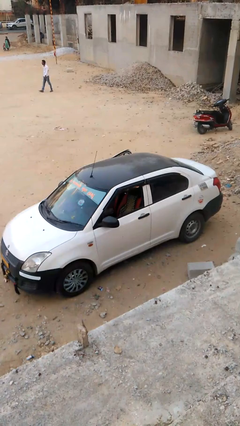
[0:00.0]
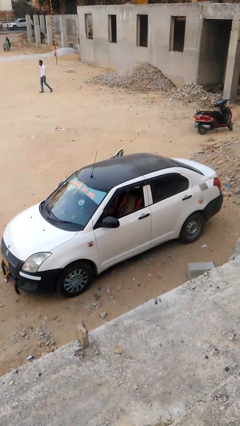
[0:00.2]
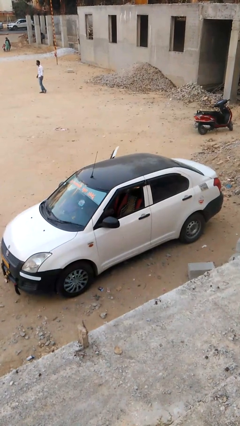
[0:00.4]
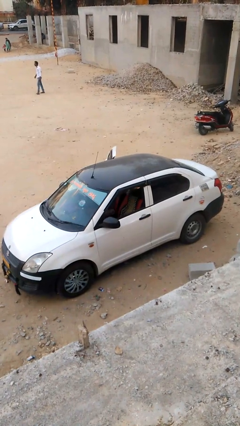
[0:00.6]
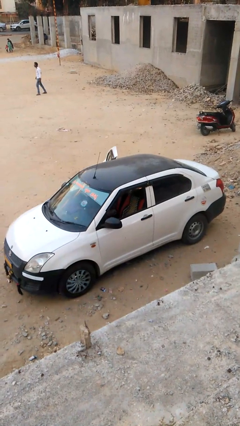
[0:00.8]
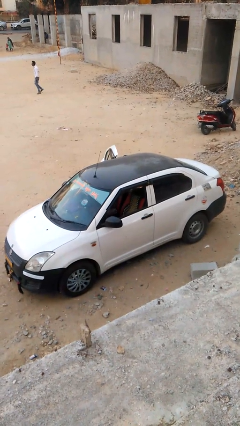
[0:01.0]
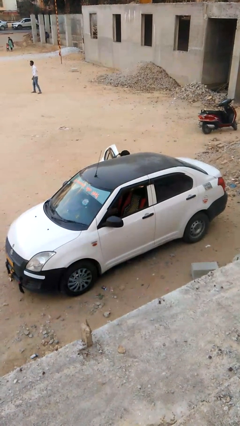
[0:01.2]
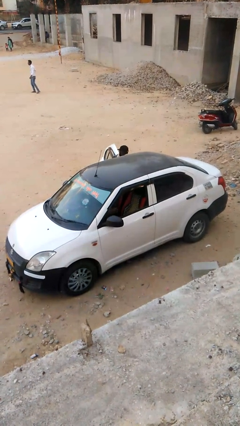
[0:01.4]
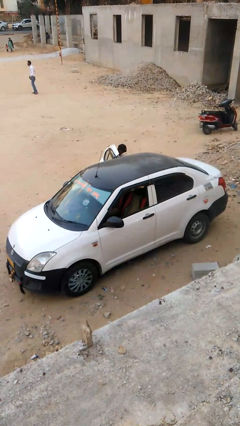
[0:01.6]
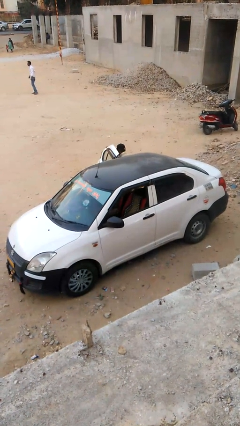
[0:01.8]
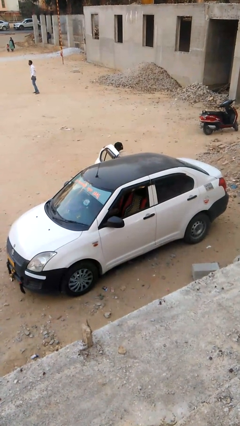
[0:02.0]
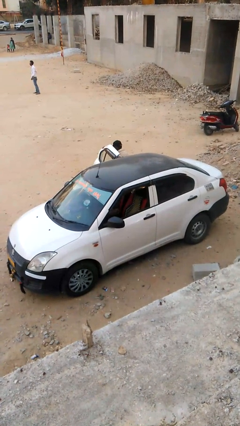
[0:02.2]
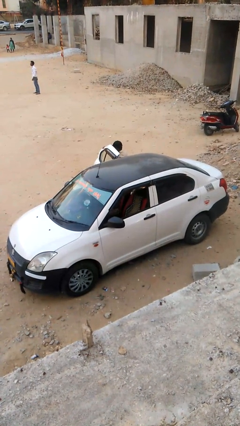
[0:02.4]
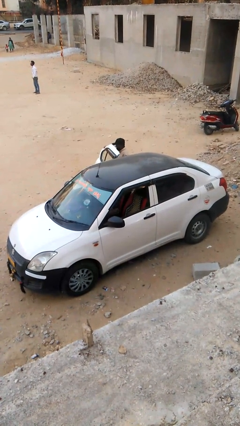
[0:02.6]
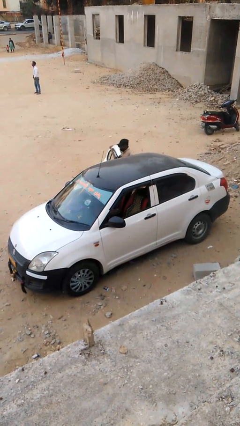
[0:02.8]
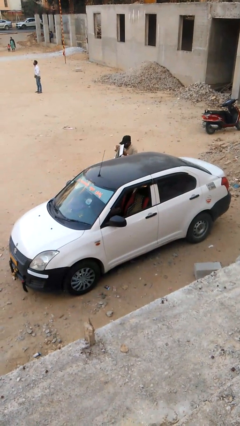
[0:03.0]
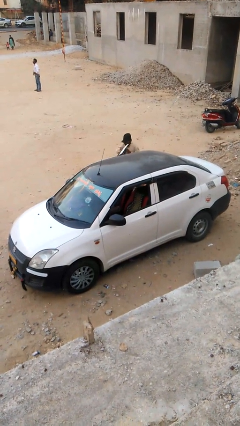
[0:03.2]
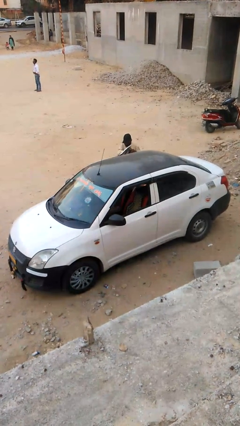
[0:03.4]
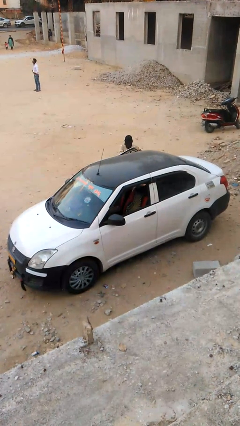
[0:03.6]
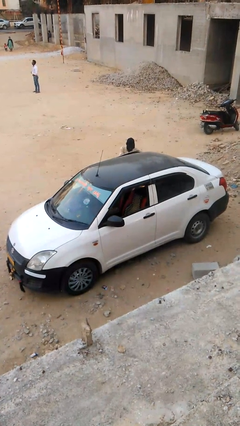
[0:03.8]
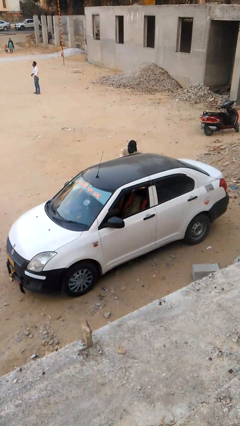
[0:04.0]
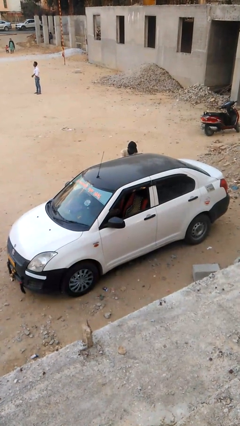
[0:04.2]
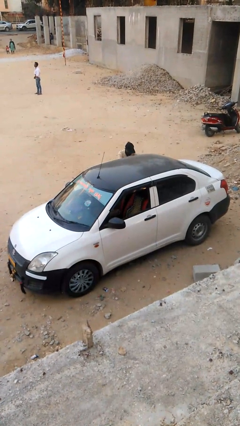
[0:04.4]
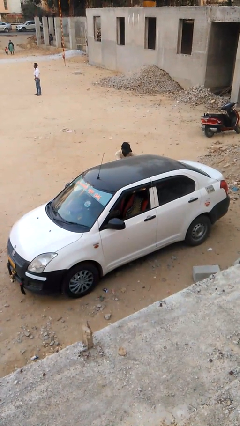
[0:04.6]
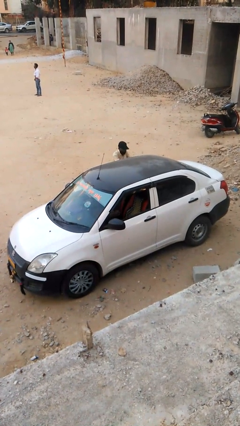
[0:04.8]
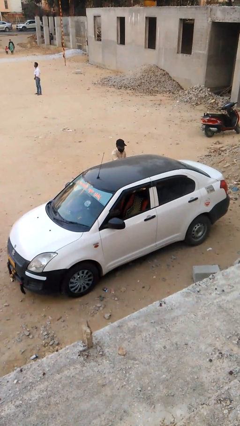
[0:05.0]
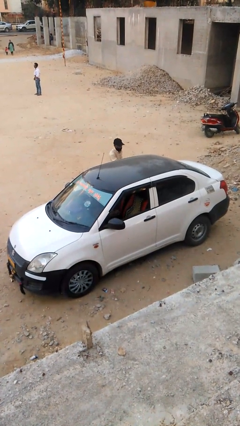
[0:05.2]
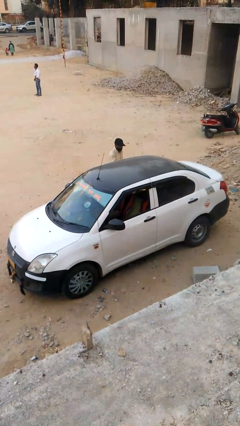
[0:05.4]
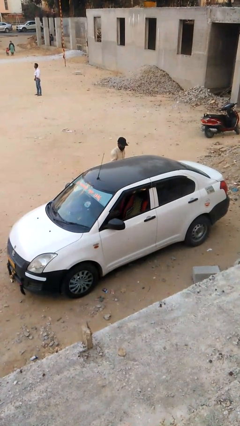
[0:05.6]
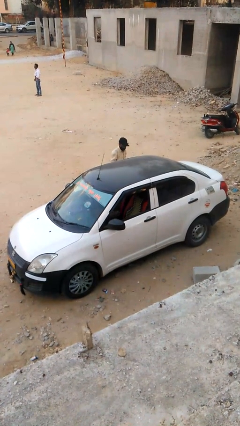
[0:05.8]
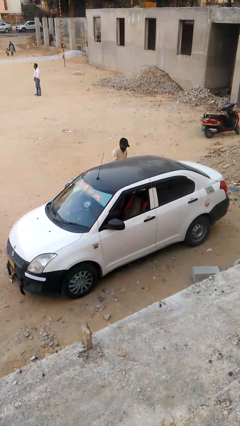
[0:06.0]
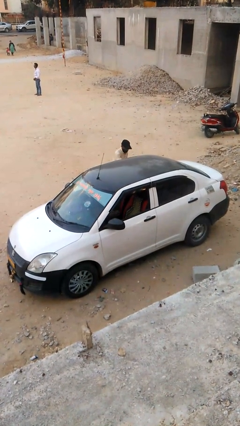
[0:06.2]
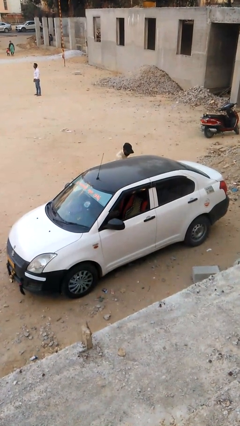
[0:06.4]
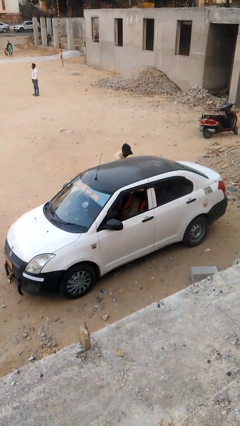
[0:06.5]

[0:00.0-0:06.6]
car drops off person

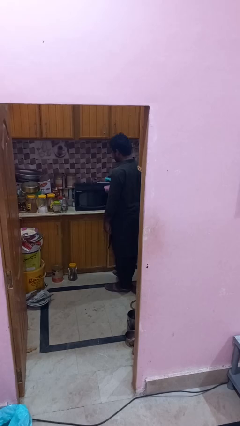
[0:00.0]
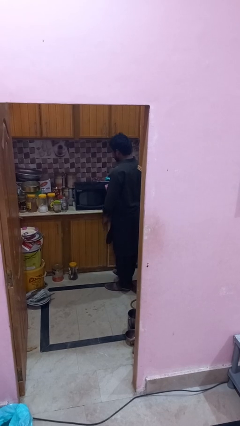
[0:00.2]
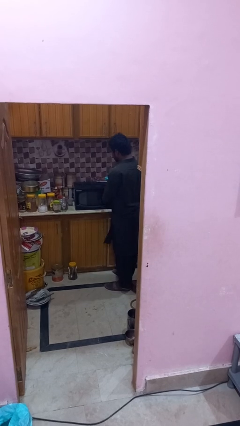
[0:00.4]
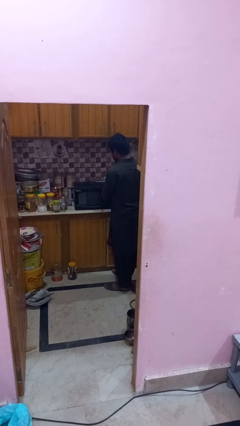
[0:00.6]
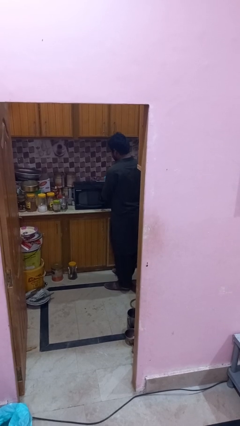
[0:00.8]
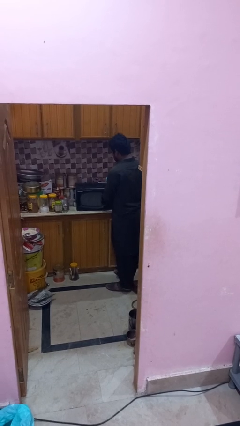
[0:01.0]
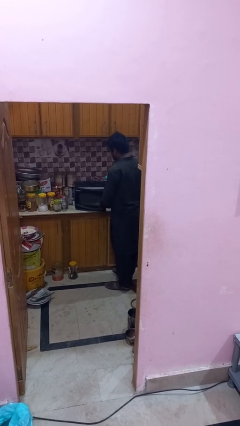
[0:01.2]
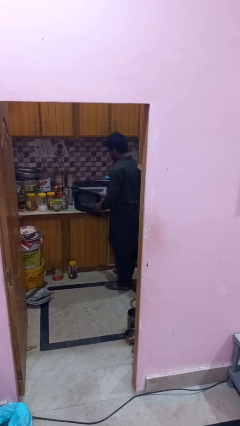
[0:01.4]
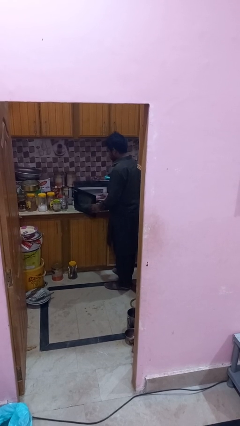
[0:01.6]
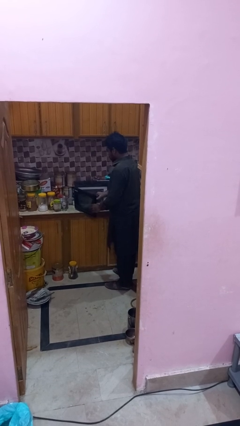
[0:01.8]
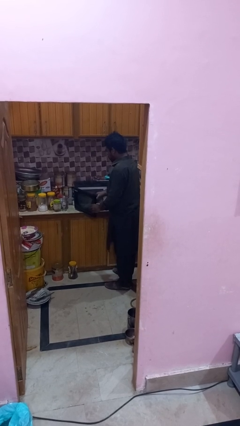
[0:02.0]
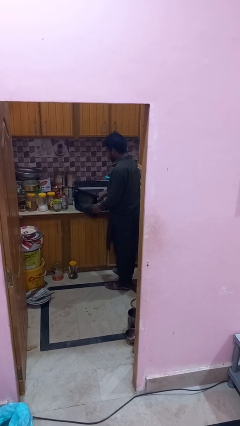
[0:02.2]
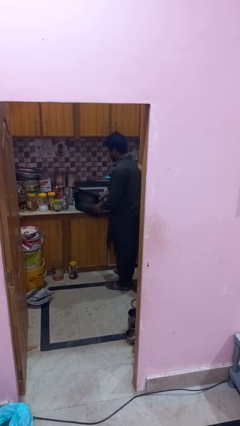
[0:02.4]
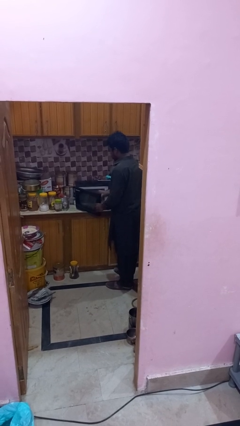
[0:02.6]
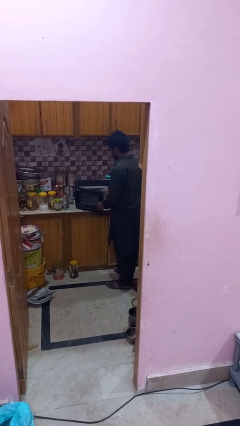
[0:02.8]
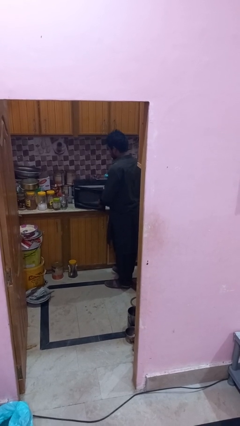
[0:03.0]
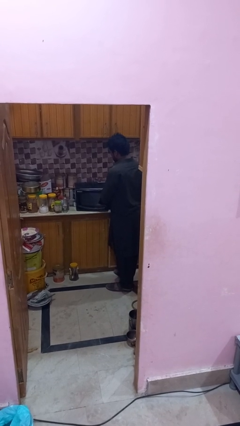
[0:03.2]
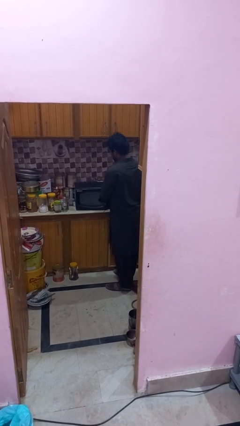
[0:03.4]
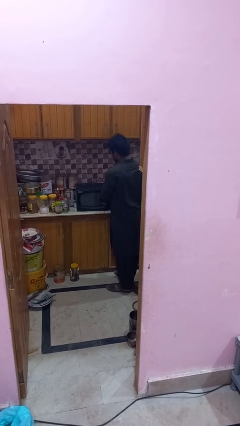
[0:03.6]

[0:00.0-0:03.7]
person puts object into microwave

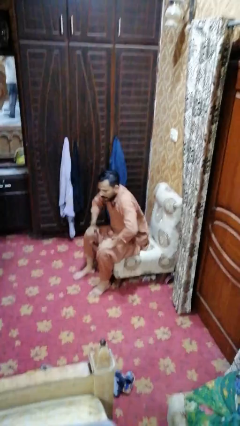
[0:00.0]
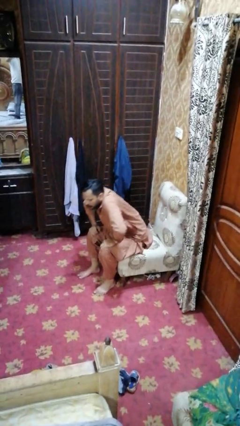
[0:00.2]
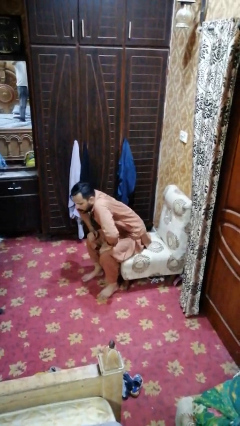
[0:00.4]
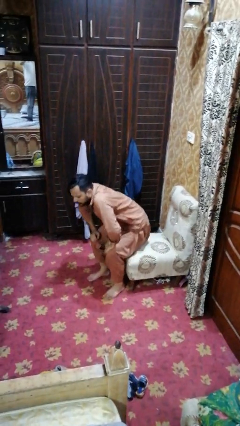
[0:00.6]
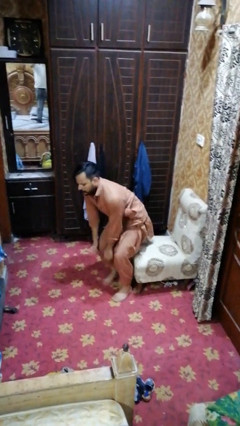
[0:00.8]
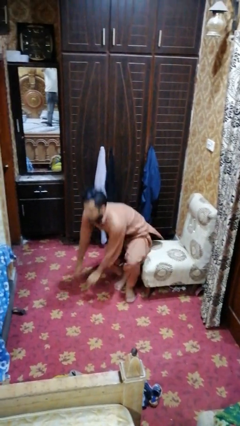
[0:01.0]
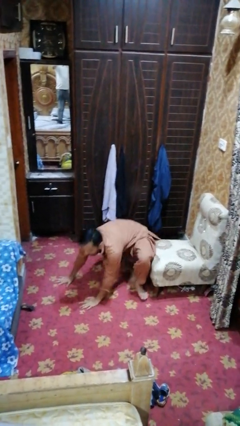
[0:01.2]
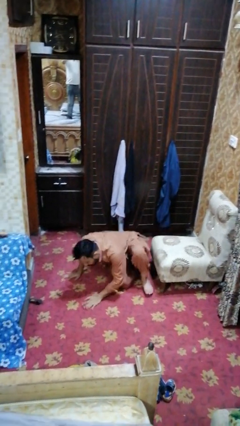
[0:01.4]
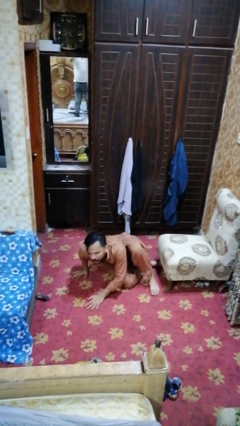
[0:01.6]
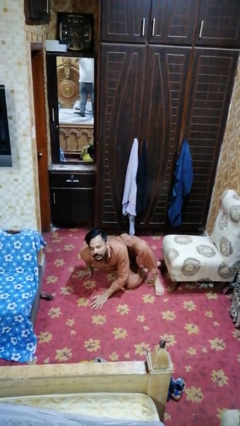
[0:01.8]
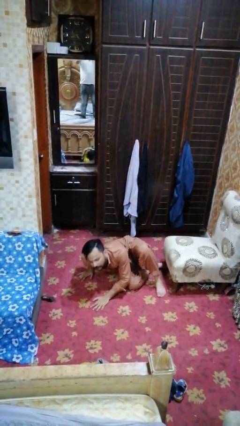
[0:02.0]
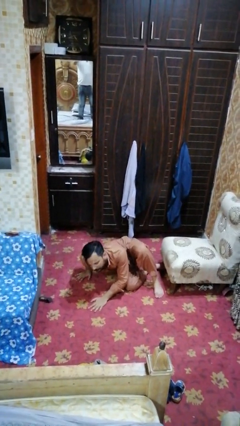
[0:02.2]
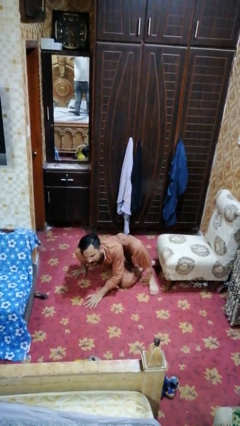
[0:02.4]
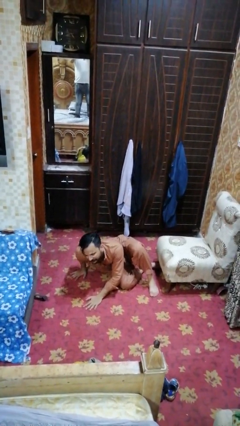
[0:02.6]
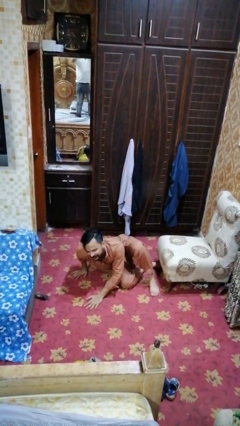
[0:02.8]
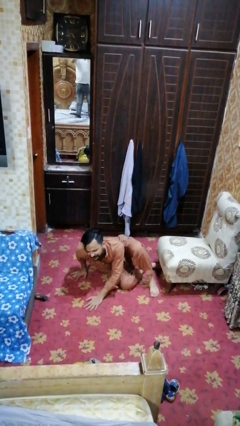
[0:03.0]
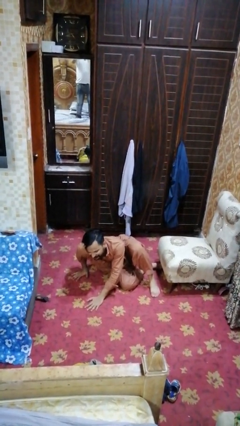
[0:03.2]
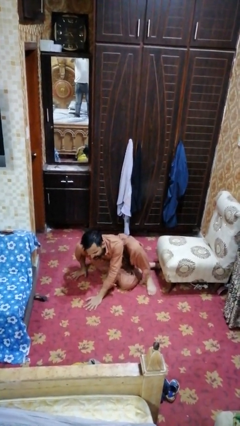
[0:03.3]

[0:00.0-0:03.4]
person falls from chair

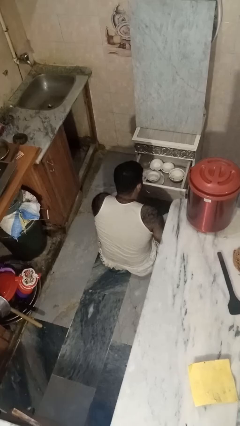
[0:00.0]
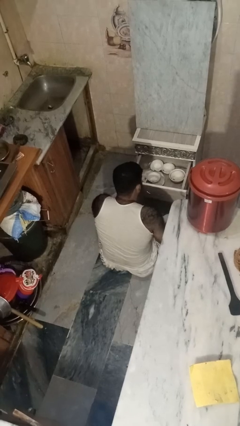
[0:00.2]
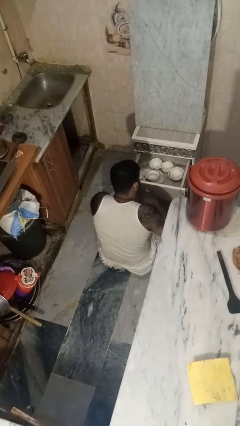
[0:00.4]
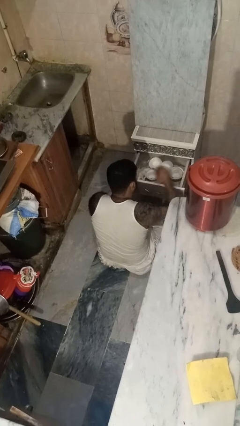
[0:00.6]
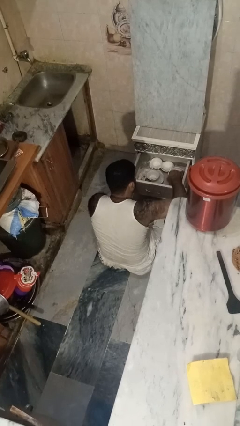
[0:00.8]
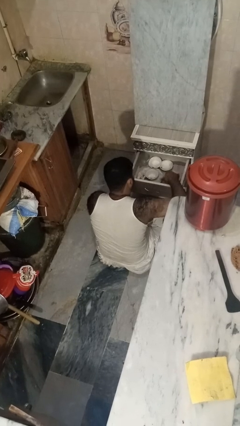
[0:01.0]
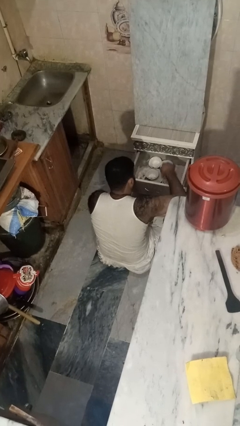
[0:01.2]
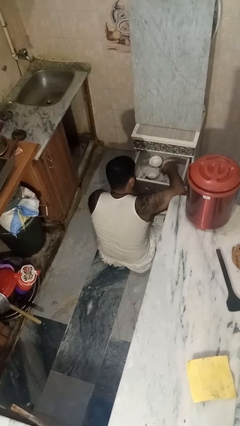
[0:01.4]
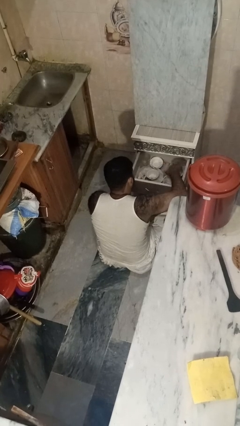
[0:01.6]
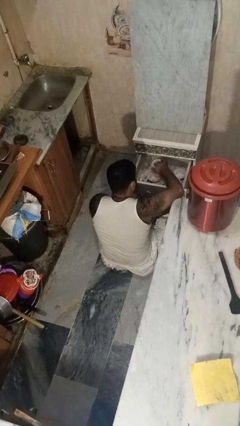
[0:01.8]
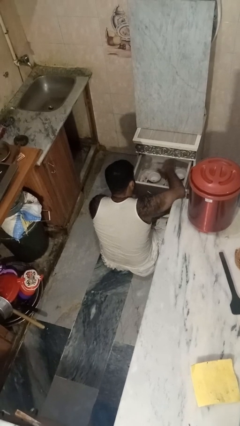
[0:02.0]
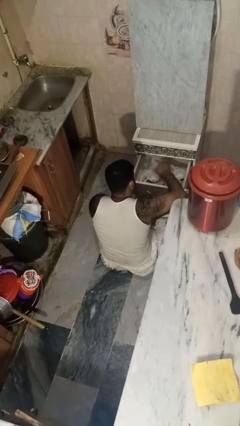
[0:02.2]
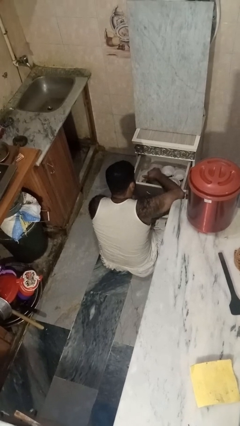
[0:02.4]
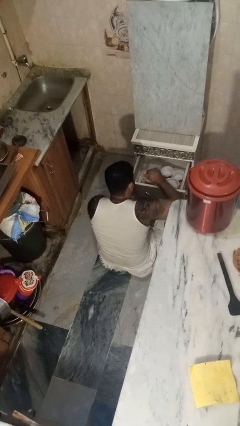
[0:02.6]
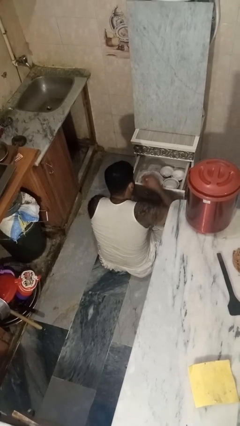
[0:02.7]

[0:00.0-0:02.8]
person searches in kitchen drawer

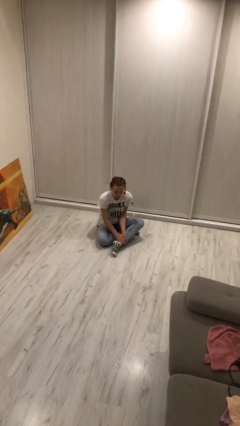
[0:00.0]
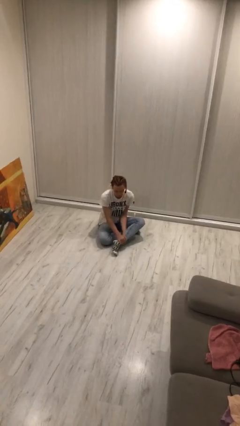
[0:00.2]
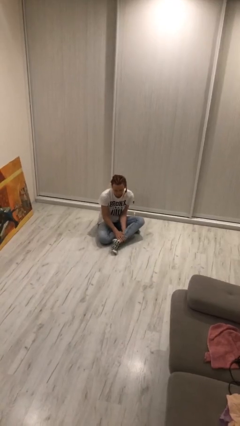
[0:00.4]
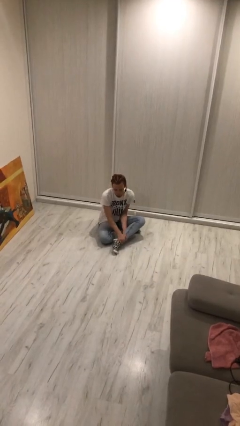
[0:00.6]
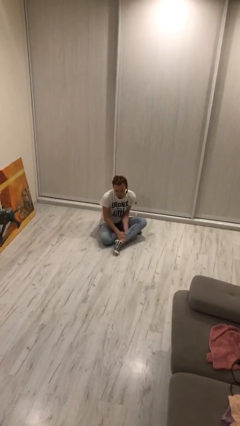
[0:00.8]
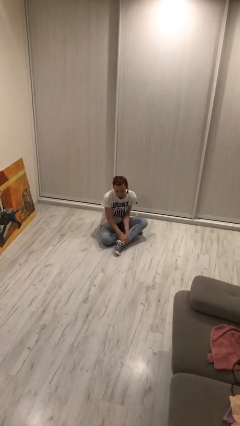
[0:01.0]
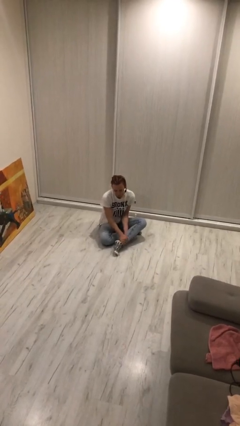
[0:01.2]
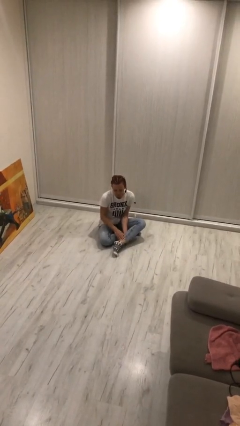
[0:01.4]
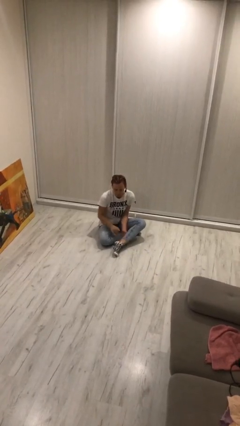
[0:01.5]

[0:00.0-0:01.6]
person rubs foot
